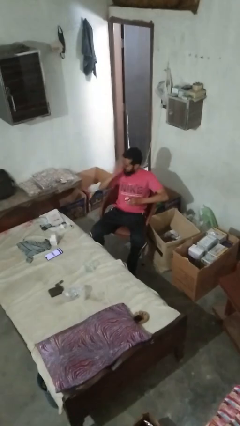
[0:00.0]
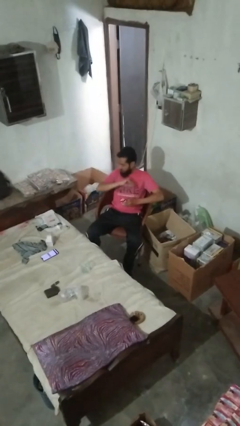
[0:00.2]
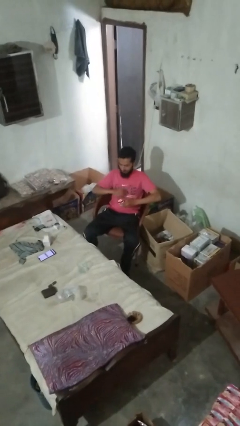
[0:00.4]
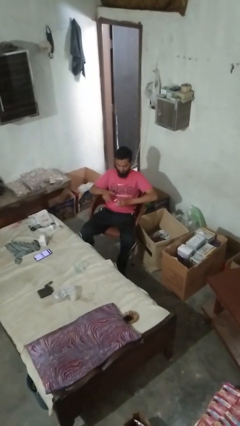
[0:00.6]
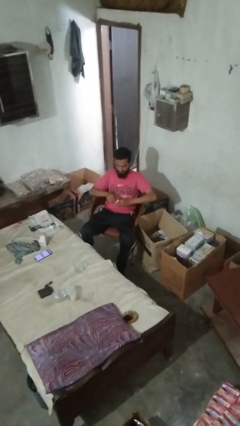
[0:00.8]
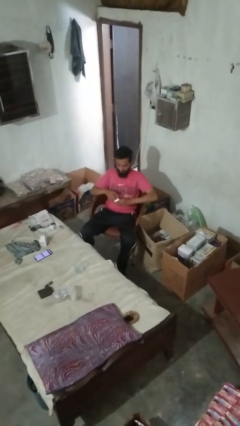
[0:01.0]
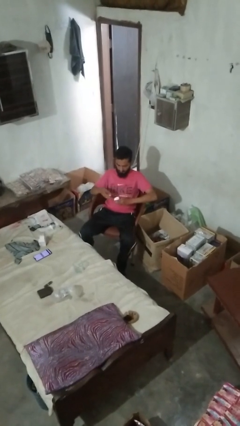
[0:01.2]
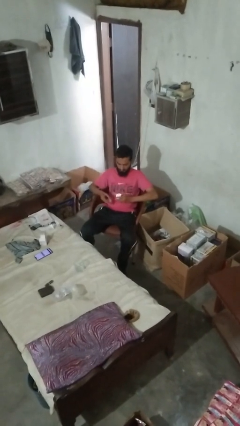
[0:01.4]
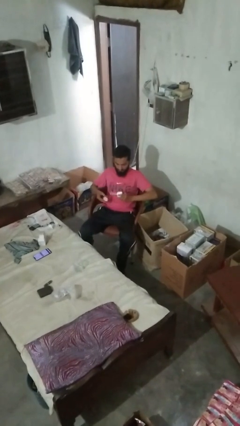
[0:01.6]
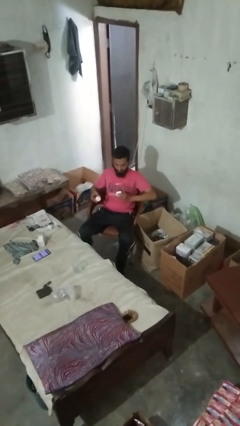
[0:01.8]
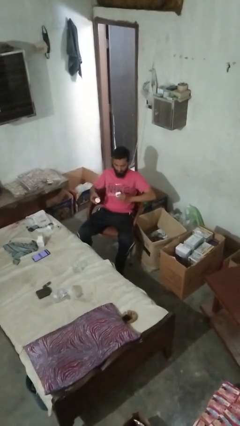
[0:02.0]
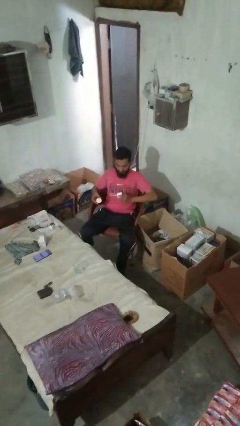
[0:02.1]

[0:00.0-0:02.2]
person opens jar

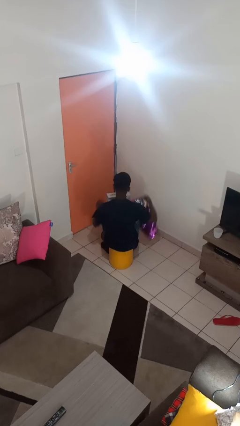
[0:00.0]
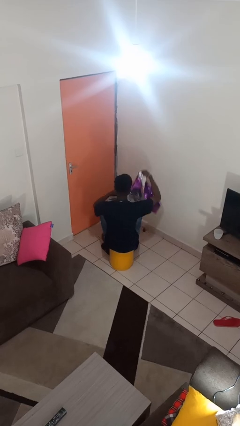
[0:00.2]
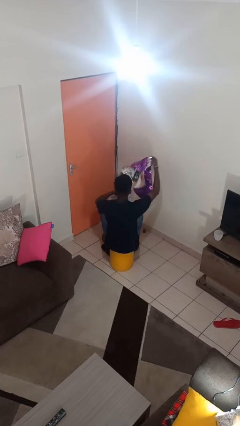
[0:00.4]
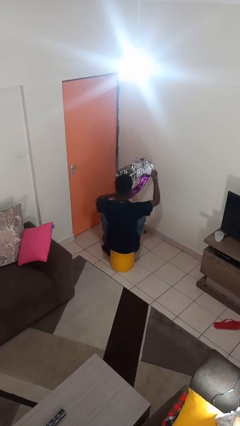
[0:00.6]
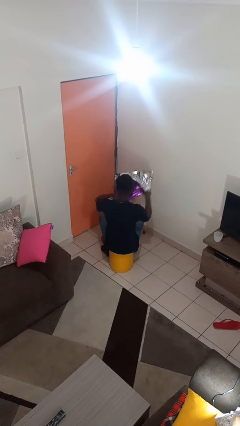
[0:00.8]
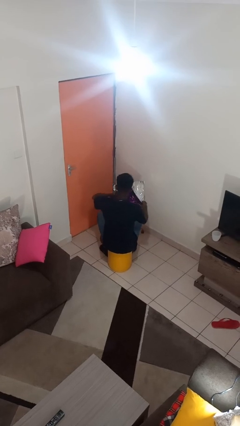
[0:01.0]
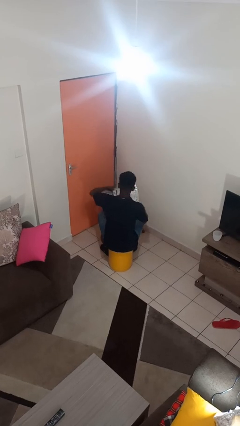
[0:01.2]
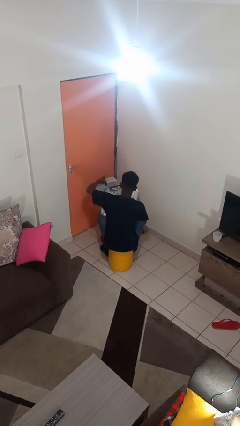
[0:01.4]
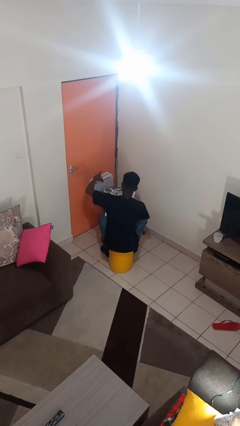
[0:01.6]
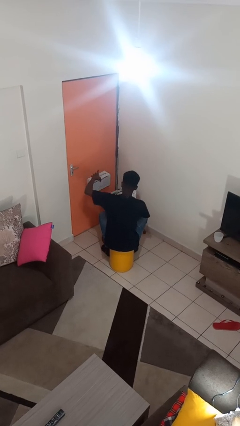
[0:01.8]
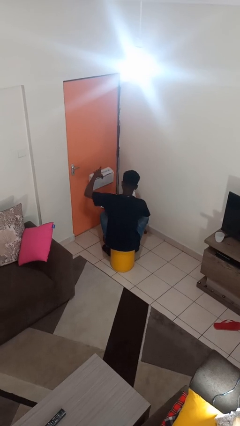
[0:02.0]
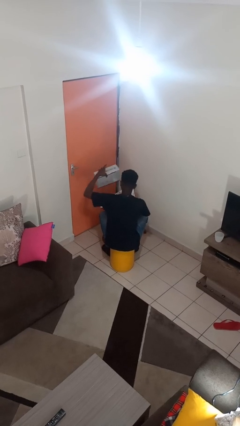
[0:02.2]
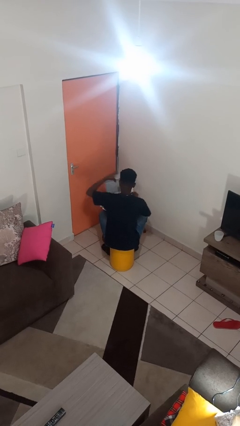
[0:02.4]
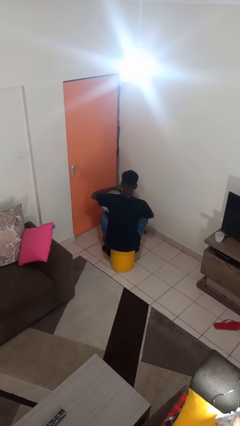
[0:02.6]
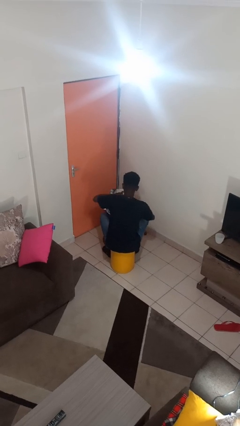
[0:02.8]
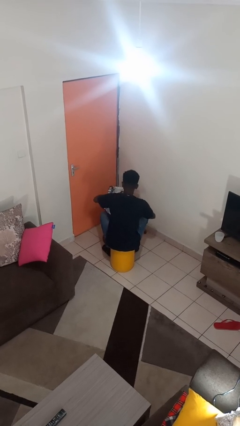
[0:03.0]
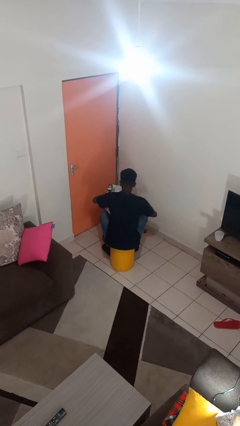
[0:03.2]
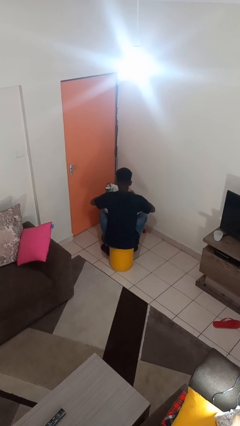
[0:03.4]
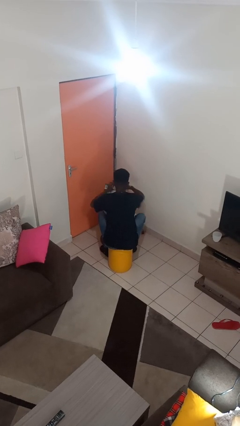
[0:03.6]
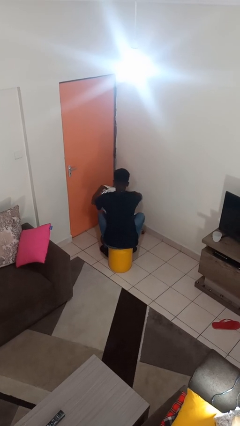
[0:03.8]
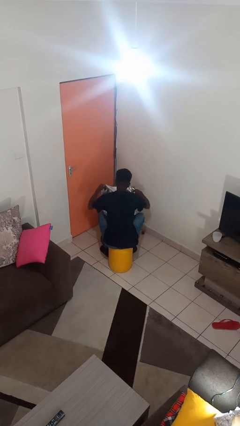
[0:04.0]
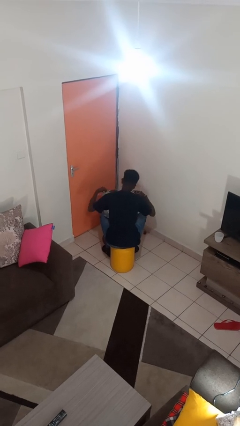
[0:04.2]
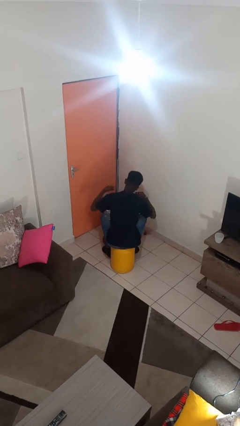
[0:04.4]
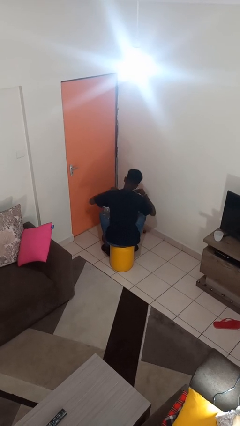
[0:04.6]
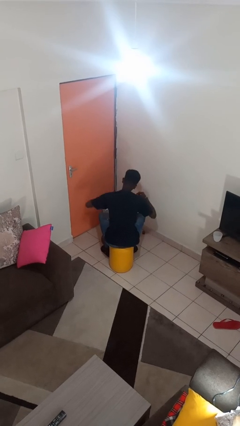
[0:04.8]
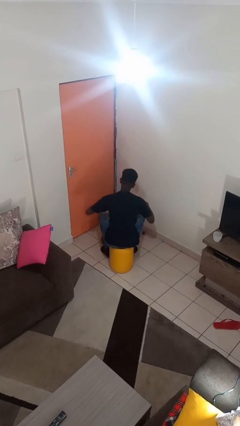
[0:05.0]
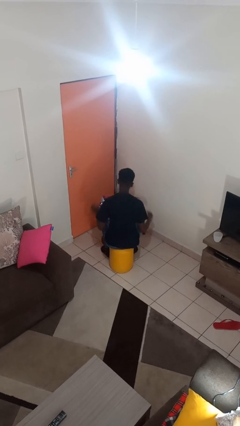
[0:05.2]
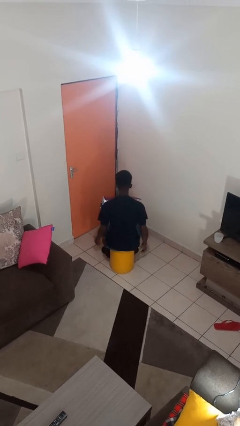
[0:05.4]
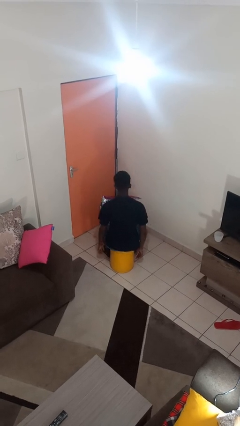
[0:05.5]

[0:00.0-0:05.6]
person wraps box

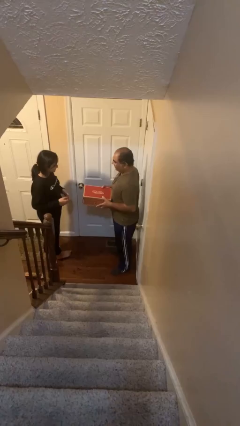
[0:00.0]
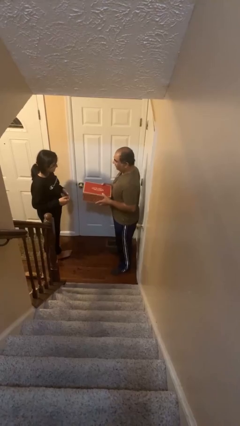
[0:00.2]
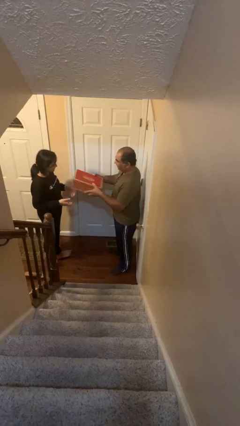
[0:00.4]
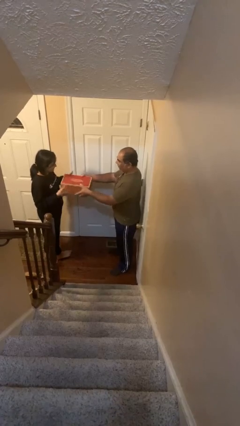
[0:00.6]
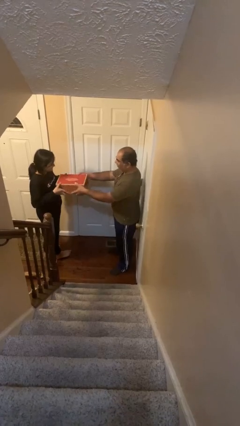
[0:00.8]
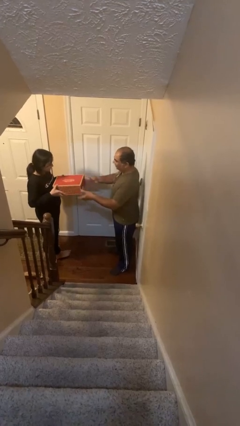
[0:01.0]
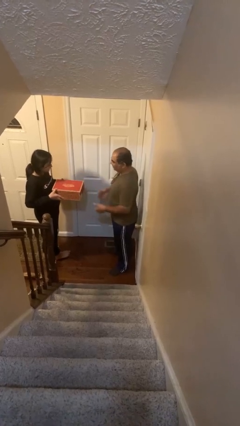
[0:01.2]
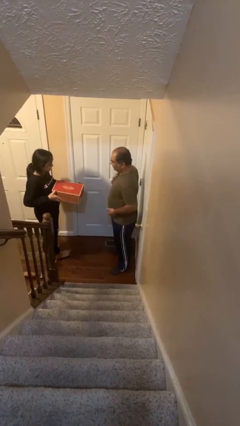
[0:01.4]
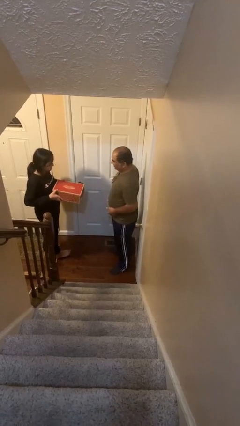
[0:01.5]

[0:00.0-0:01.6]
person transfers object to person

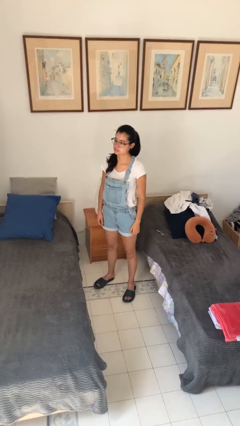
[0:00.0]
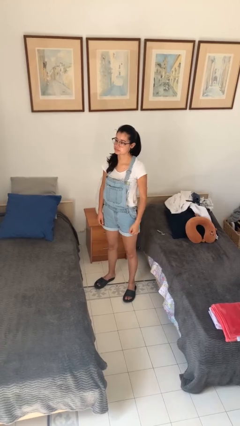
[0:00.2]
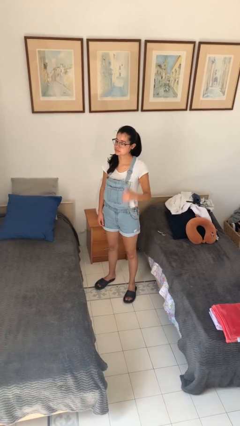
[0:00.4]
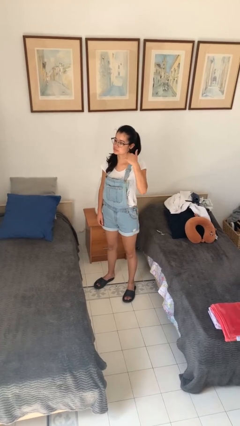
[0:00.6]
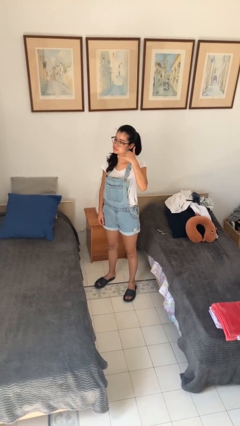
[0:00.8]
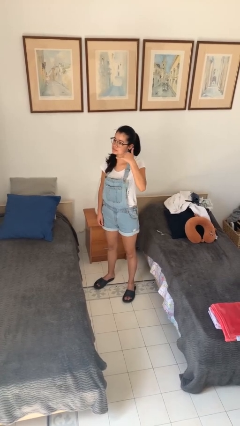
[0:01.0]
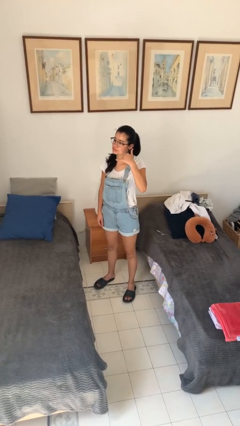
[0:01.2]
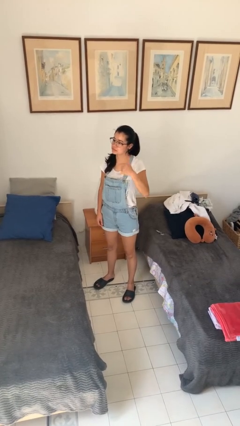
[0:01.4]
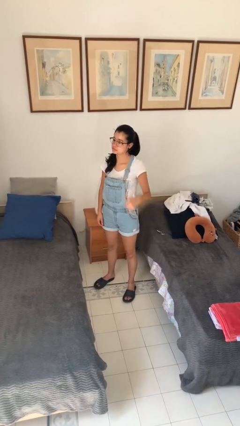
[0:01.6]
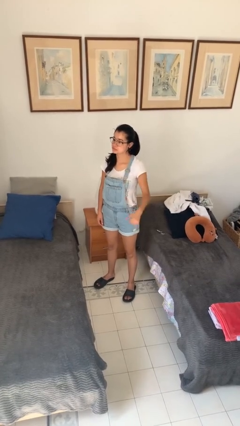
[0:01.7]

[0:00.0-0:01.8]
person gestures call me

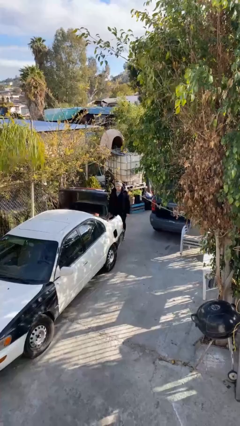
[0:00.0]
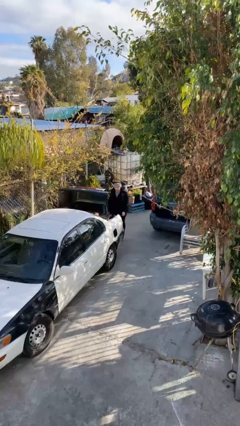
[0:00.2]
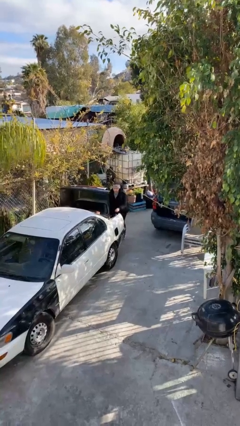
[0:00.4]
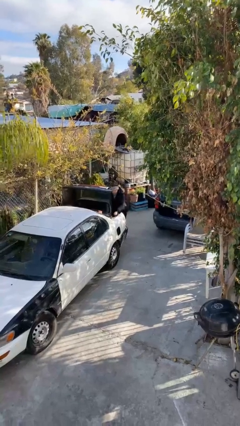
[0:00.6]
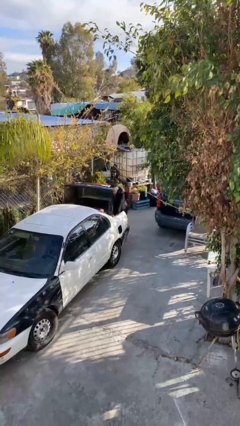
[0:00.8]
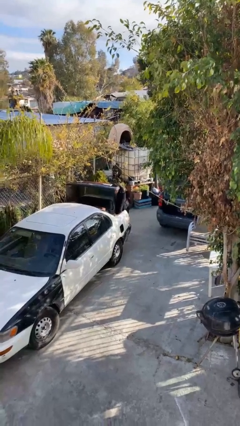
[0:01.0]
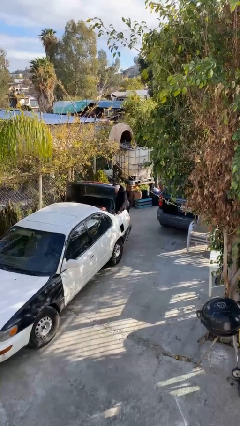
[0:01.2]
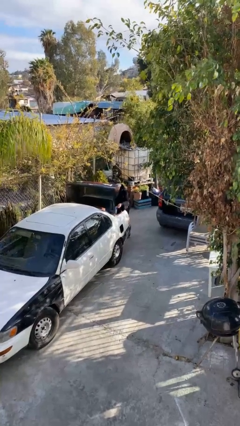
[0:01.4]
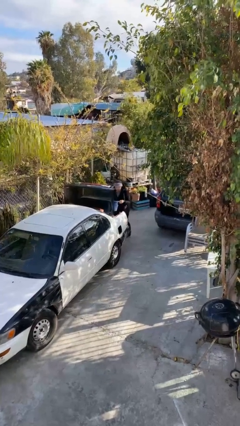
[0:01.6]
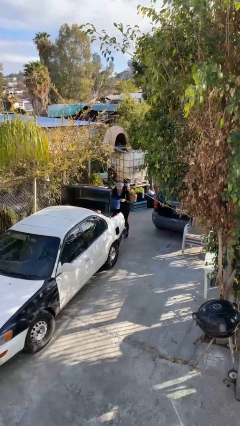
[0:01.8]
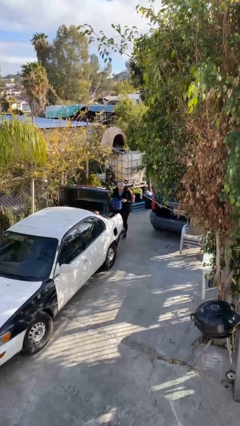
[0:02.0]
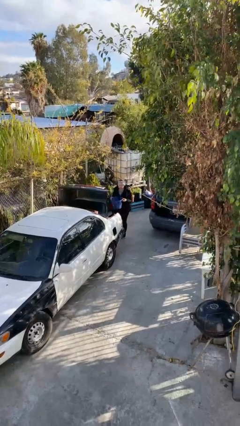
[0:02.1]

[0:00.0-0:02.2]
person unloads car

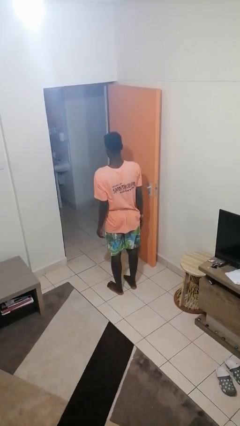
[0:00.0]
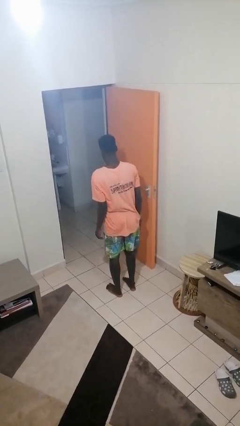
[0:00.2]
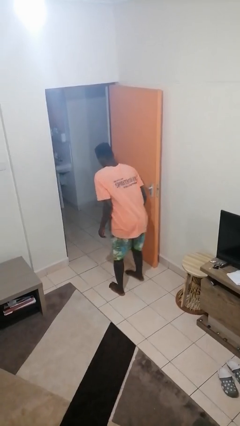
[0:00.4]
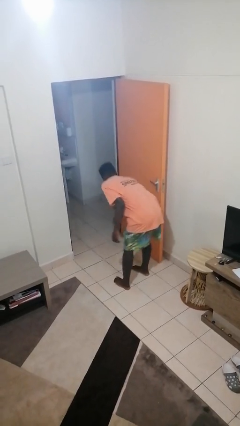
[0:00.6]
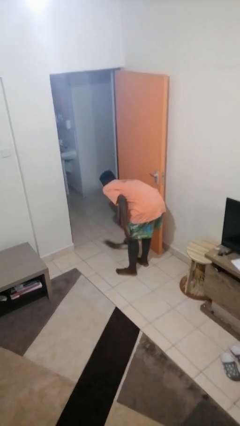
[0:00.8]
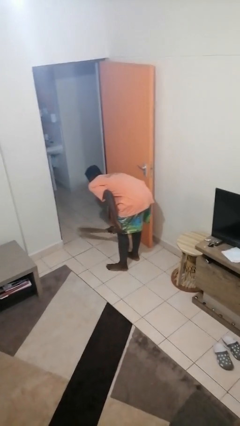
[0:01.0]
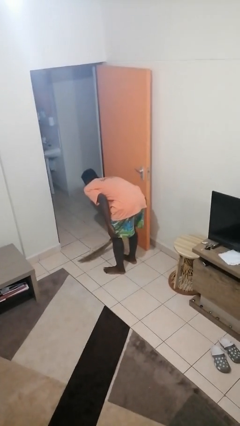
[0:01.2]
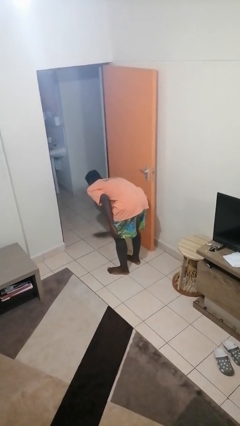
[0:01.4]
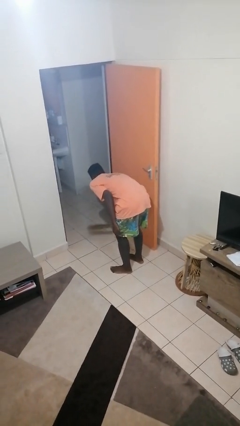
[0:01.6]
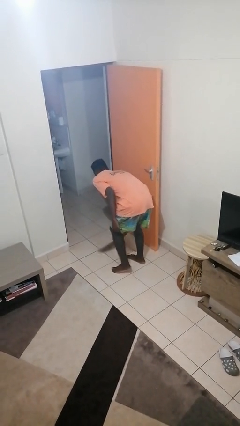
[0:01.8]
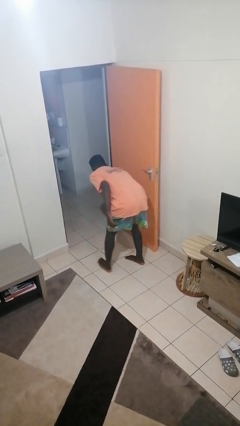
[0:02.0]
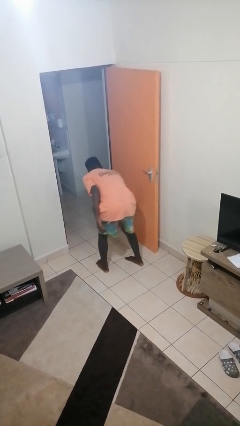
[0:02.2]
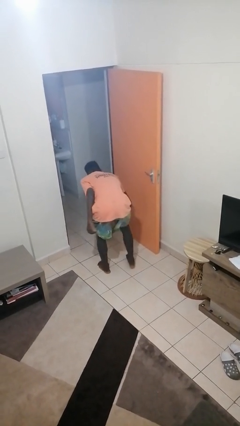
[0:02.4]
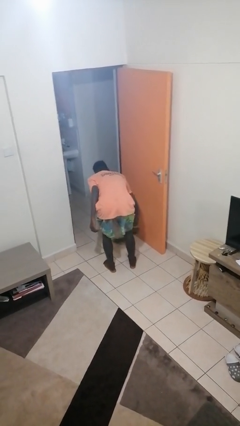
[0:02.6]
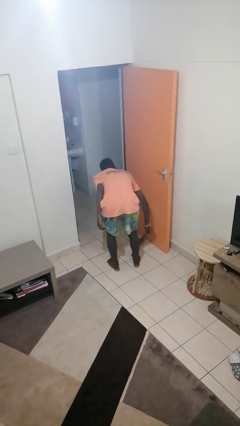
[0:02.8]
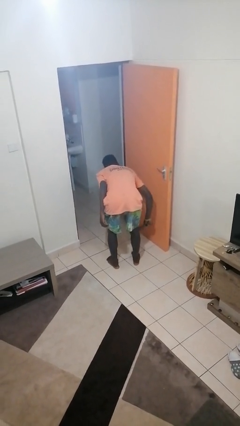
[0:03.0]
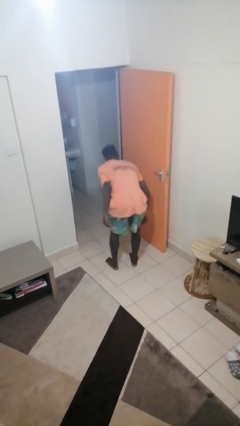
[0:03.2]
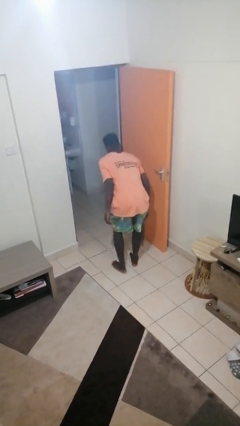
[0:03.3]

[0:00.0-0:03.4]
person sweeps floor

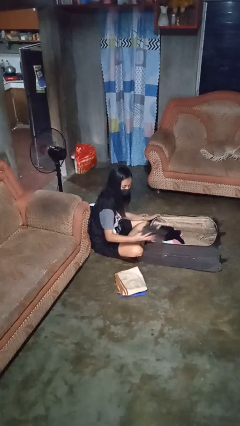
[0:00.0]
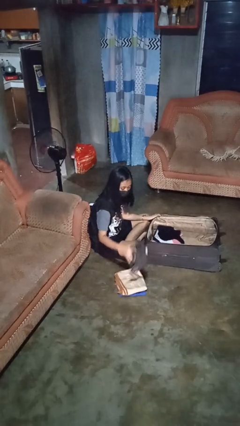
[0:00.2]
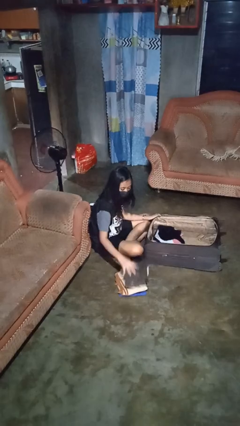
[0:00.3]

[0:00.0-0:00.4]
person unloads clothes from suitcase

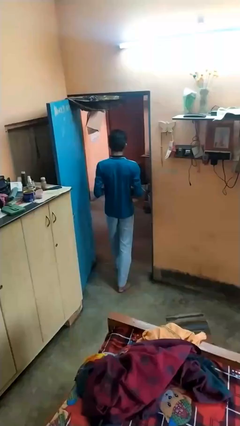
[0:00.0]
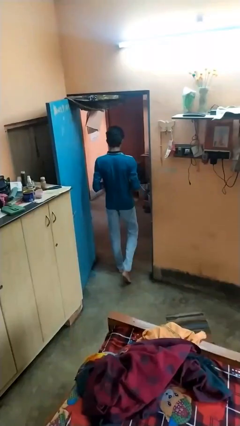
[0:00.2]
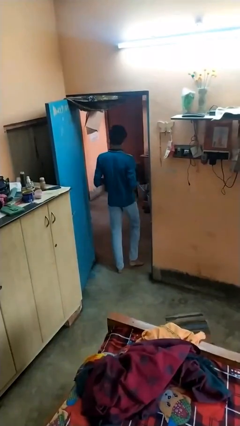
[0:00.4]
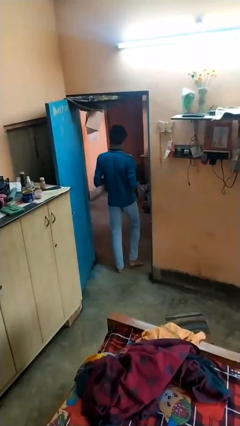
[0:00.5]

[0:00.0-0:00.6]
person exits scene through structure
